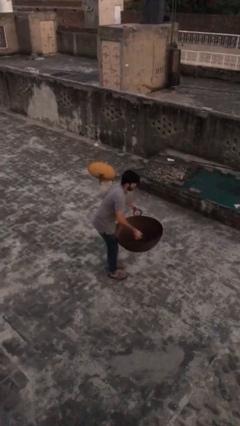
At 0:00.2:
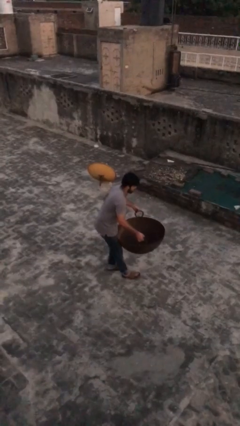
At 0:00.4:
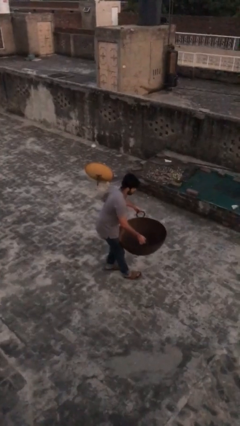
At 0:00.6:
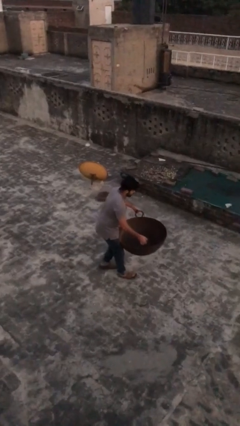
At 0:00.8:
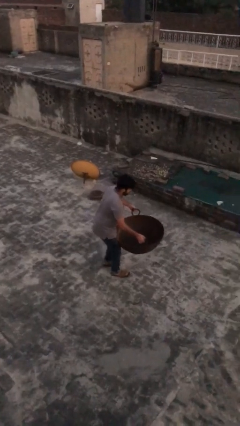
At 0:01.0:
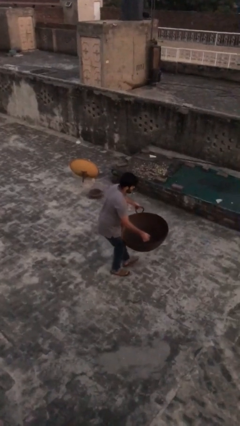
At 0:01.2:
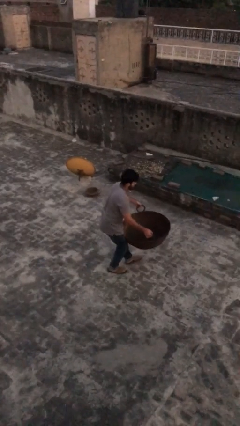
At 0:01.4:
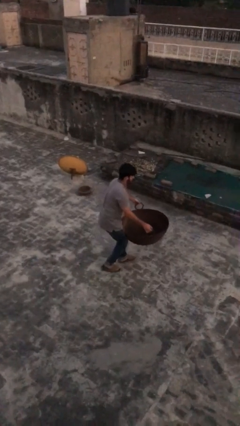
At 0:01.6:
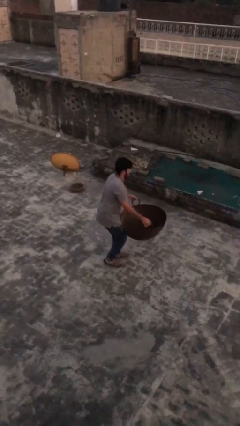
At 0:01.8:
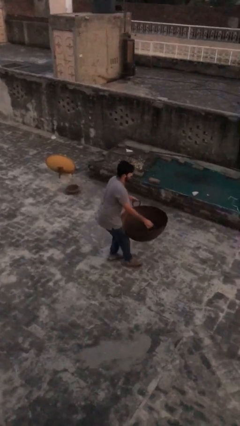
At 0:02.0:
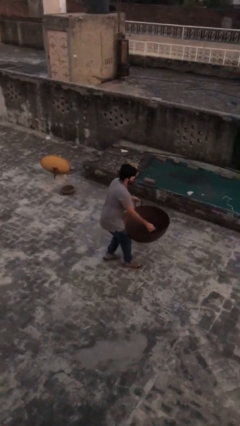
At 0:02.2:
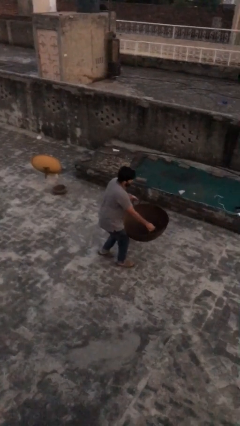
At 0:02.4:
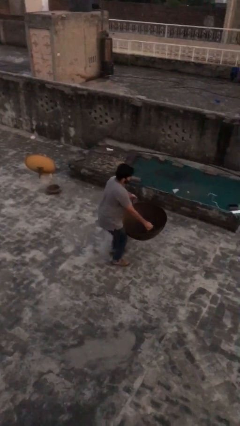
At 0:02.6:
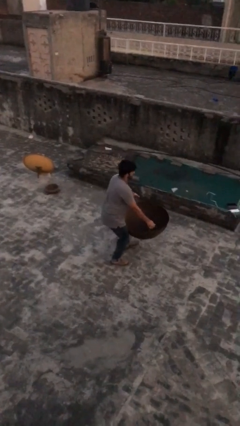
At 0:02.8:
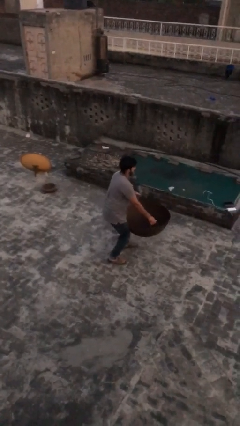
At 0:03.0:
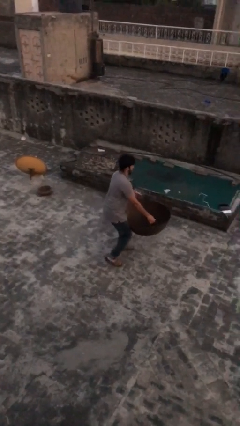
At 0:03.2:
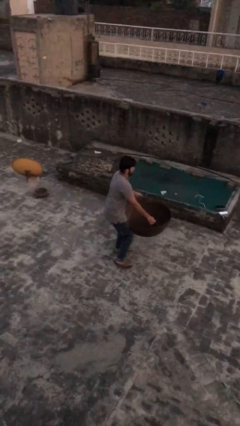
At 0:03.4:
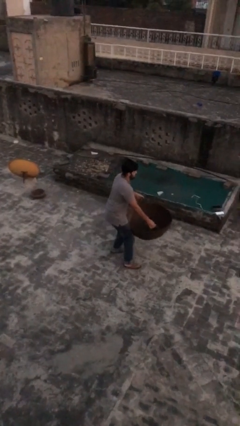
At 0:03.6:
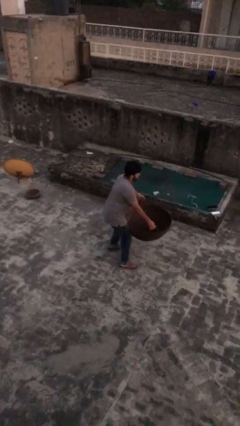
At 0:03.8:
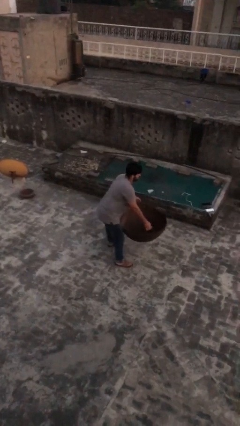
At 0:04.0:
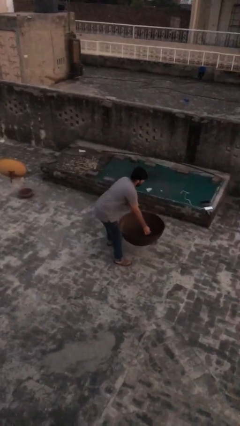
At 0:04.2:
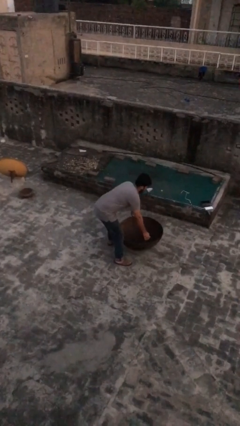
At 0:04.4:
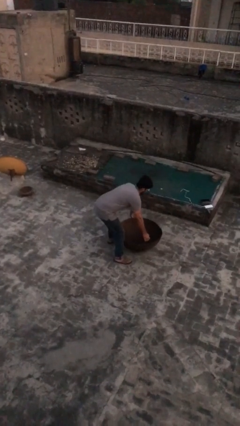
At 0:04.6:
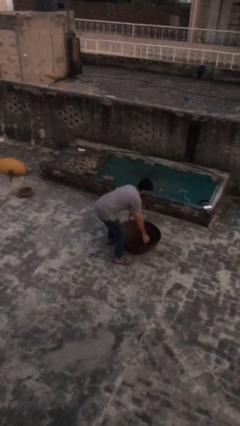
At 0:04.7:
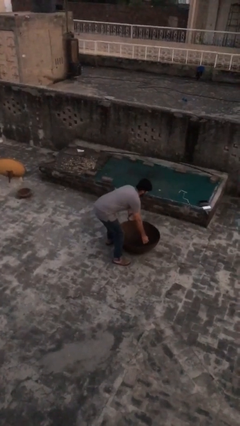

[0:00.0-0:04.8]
person carries heavy object

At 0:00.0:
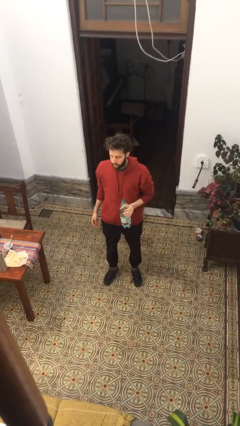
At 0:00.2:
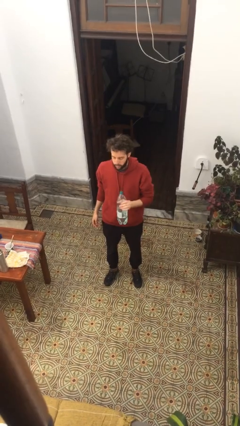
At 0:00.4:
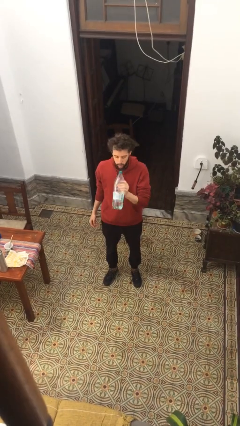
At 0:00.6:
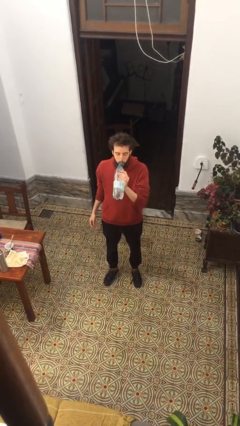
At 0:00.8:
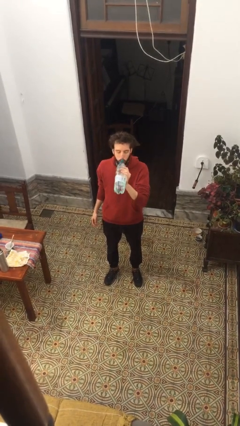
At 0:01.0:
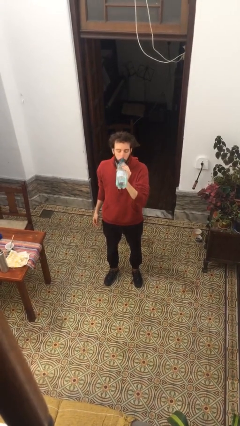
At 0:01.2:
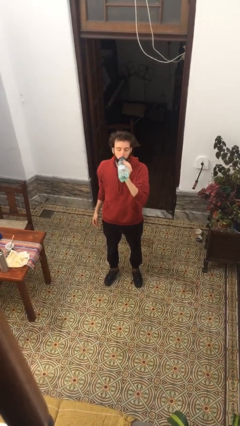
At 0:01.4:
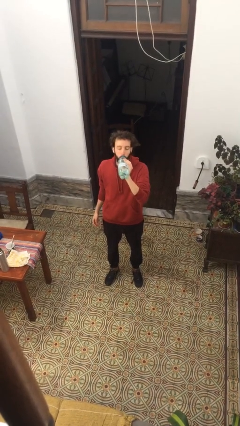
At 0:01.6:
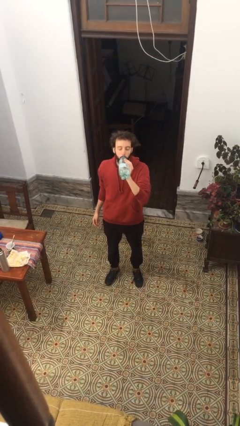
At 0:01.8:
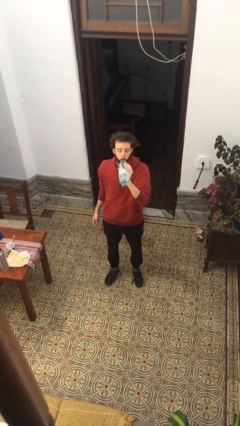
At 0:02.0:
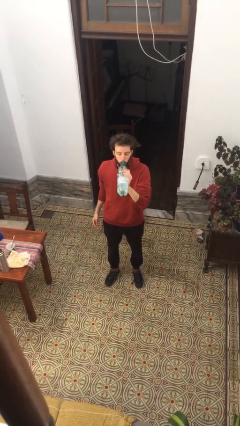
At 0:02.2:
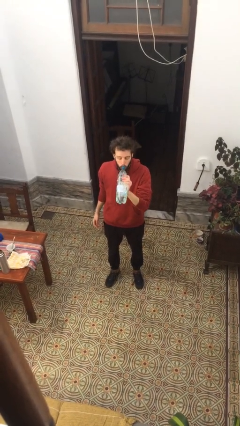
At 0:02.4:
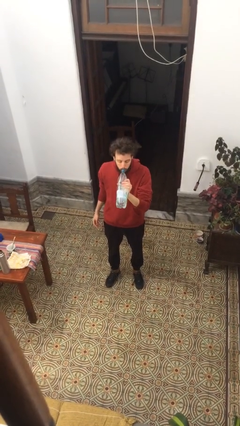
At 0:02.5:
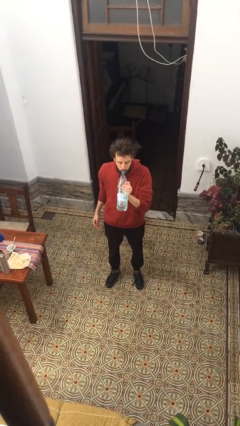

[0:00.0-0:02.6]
person drinks from bottle

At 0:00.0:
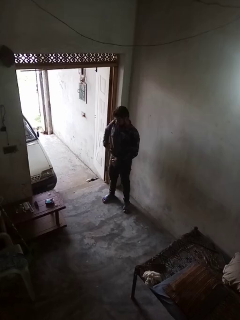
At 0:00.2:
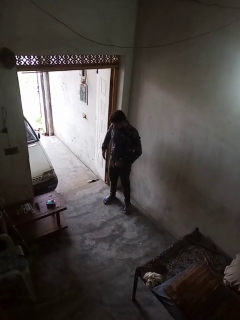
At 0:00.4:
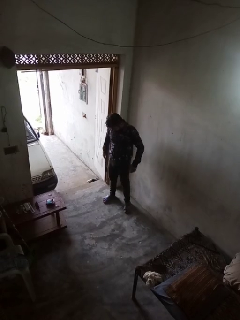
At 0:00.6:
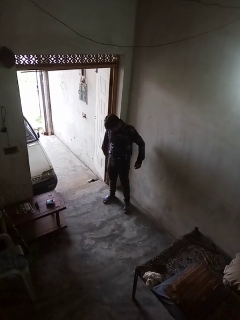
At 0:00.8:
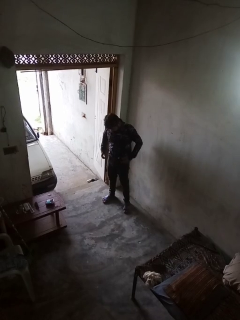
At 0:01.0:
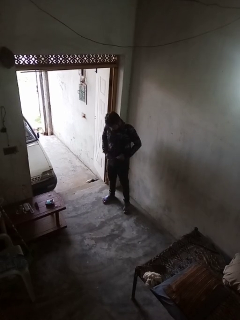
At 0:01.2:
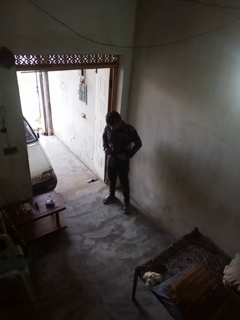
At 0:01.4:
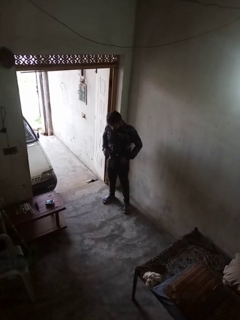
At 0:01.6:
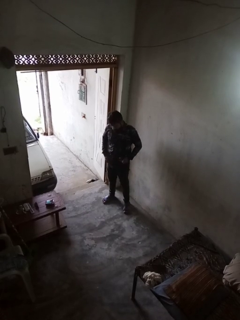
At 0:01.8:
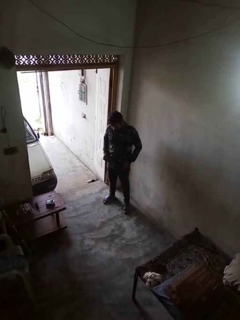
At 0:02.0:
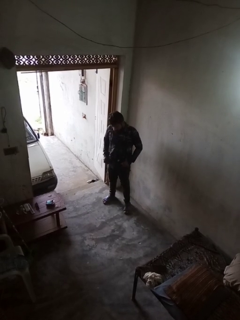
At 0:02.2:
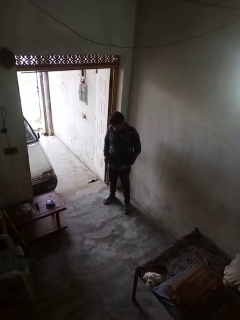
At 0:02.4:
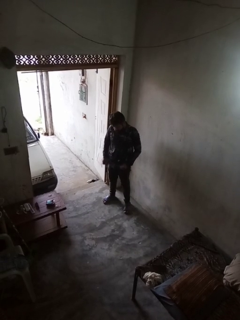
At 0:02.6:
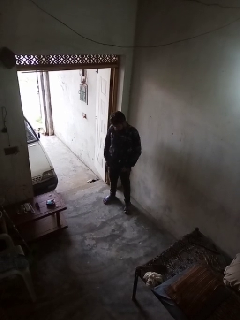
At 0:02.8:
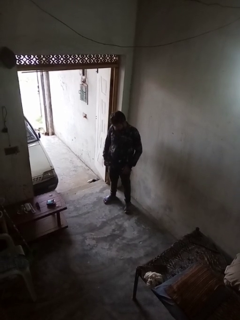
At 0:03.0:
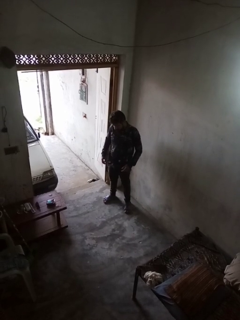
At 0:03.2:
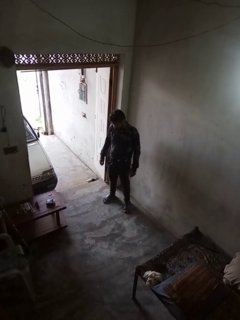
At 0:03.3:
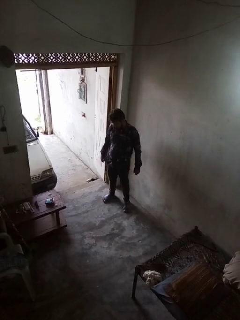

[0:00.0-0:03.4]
person untucks shirt

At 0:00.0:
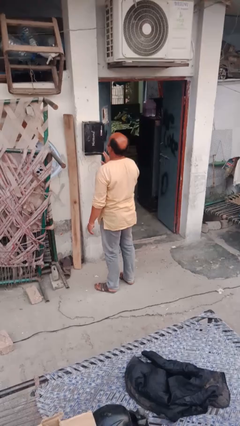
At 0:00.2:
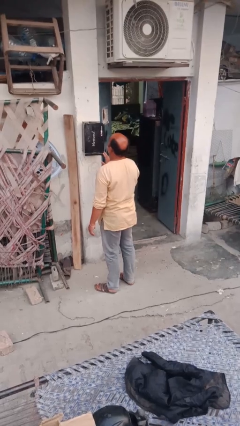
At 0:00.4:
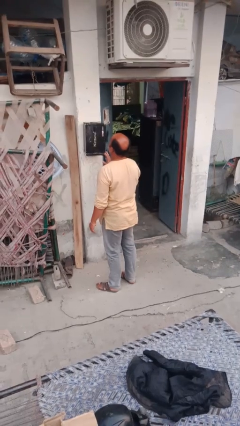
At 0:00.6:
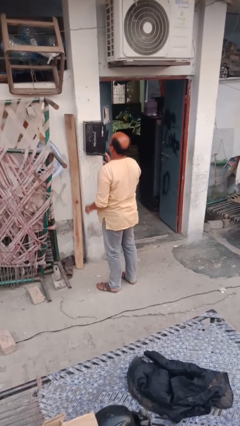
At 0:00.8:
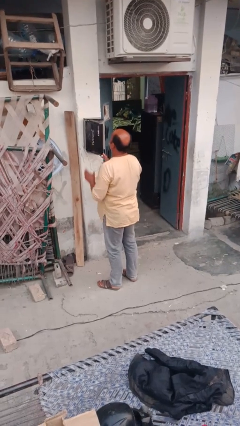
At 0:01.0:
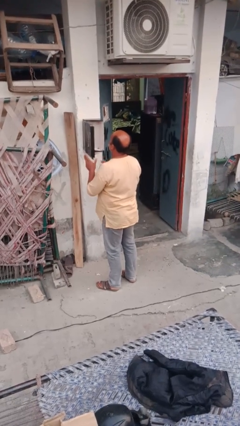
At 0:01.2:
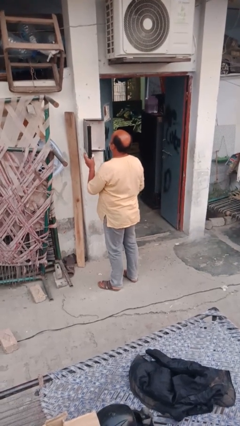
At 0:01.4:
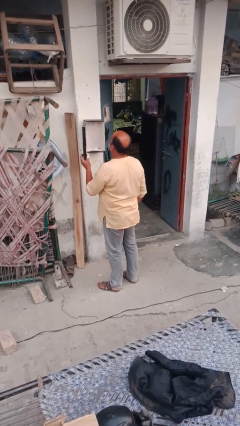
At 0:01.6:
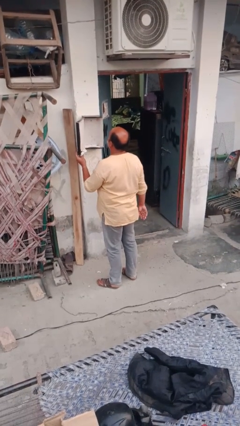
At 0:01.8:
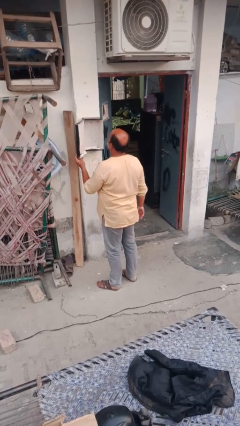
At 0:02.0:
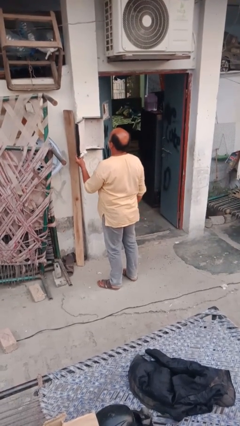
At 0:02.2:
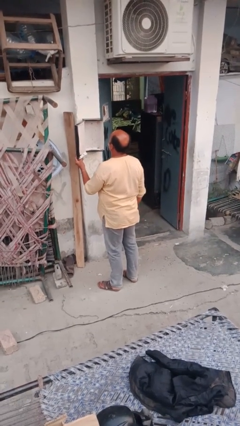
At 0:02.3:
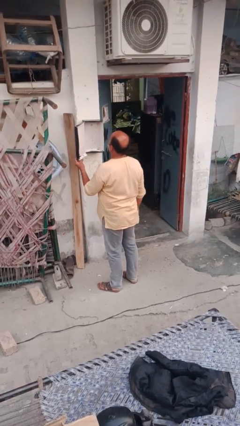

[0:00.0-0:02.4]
person opens mailbox

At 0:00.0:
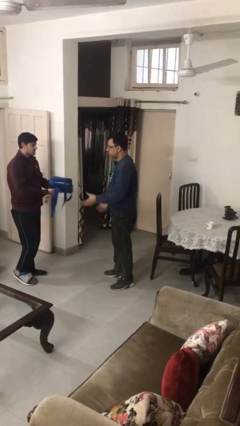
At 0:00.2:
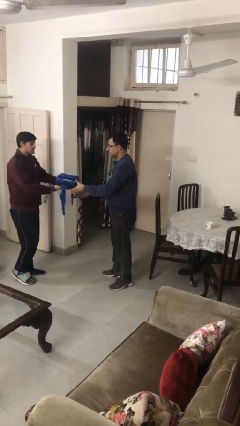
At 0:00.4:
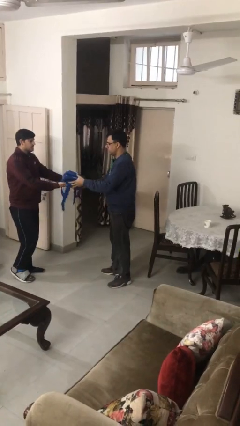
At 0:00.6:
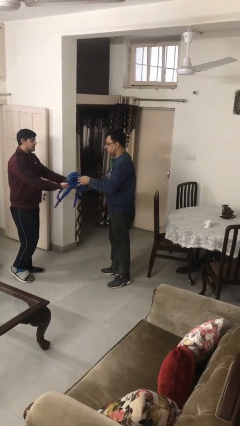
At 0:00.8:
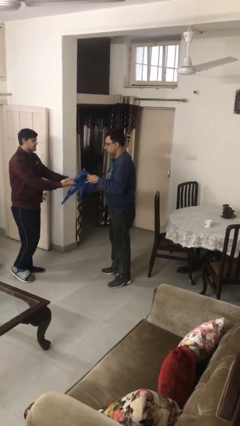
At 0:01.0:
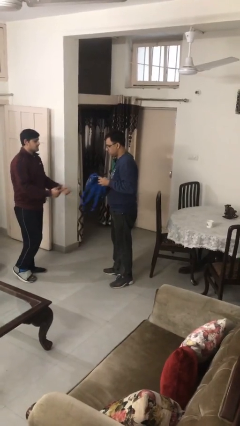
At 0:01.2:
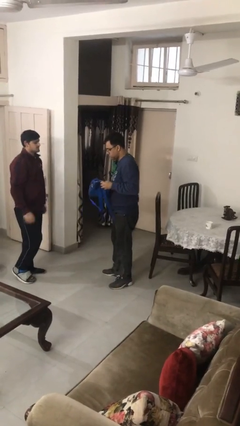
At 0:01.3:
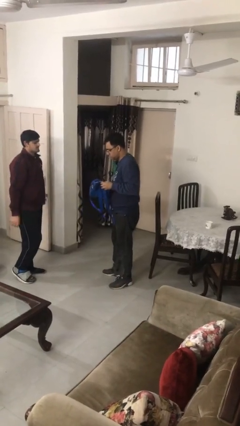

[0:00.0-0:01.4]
person transfers object to person

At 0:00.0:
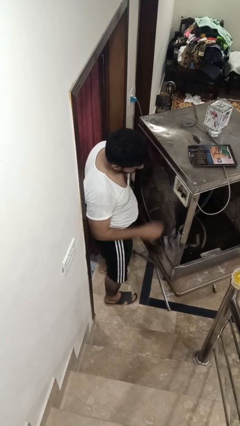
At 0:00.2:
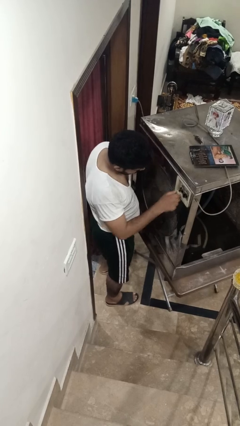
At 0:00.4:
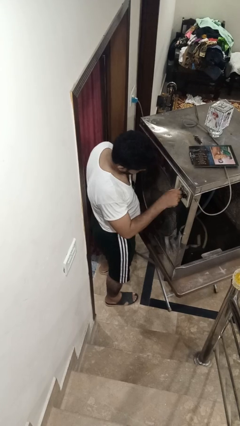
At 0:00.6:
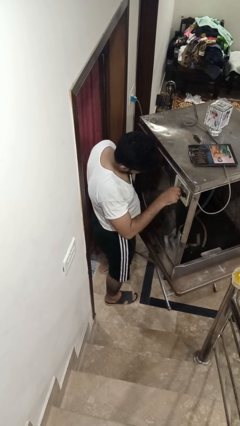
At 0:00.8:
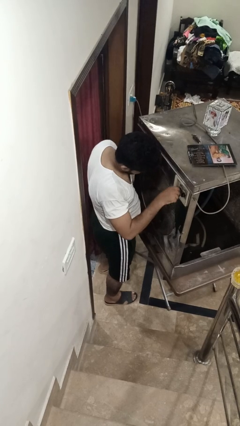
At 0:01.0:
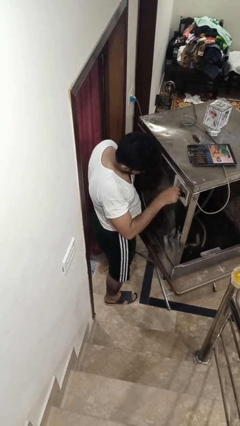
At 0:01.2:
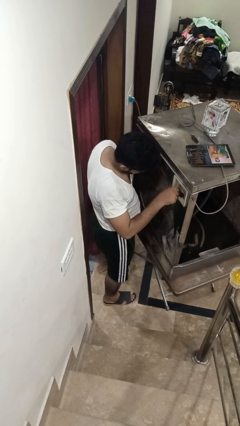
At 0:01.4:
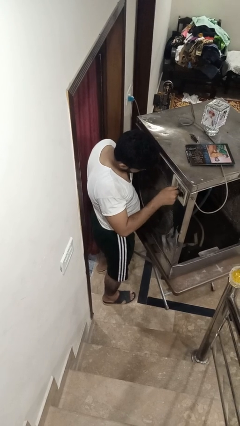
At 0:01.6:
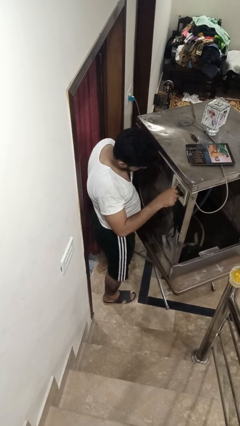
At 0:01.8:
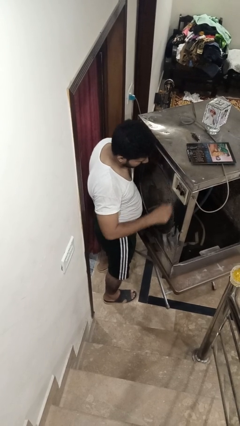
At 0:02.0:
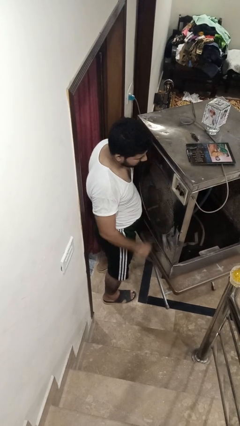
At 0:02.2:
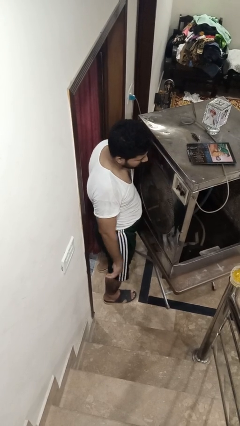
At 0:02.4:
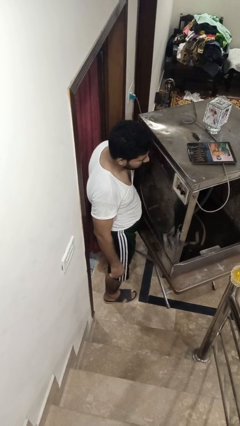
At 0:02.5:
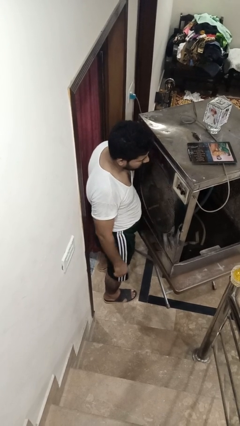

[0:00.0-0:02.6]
person adjusts thermostat

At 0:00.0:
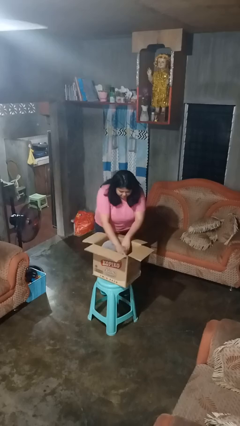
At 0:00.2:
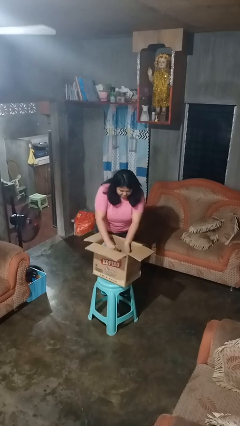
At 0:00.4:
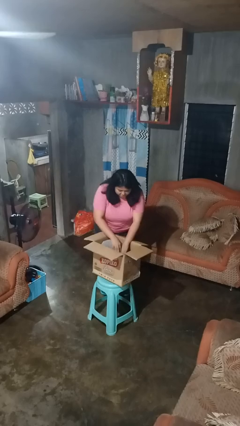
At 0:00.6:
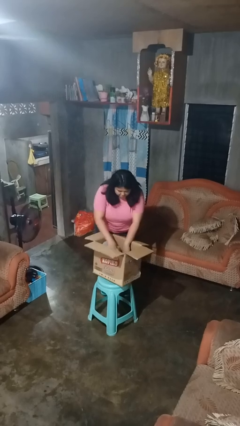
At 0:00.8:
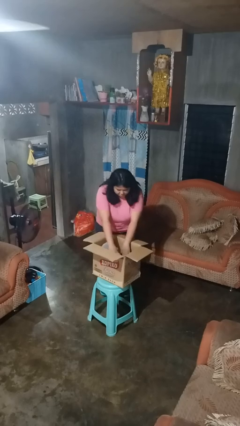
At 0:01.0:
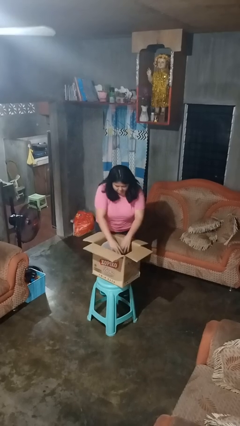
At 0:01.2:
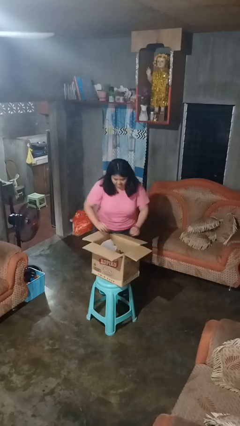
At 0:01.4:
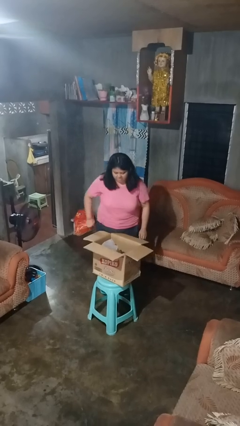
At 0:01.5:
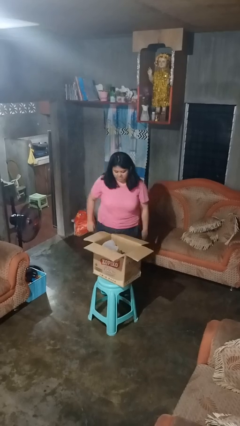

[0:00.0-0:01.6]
person searches in box
